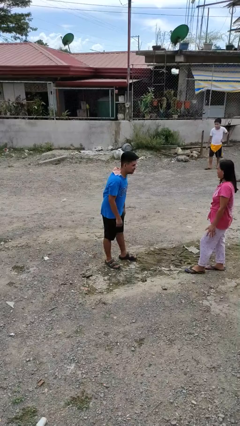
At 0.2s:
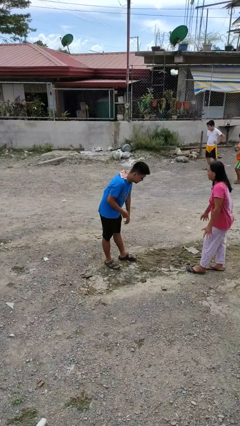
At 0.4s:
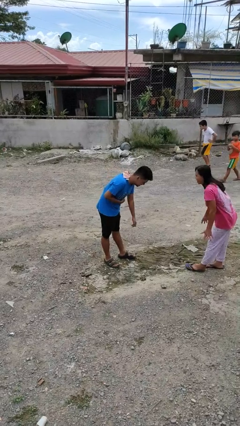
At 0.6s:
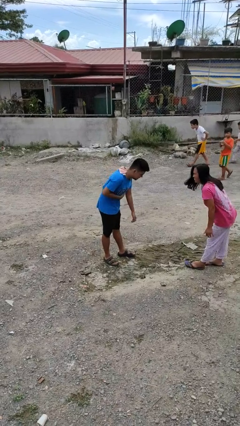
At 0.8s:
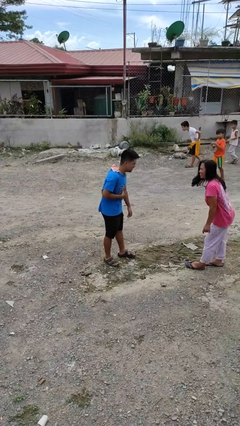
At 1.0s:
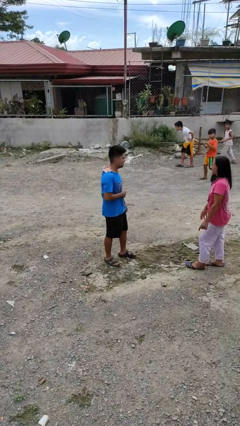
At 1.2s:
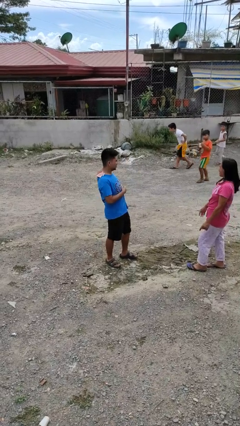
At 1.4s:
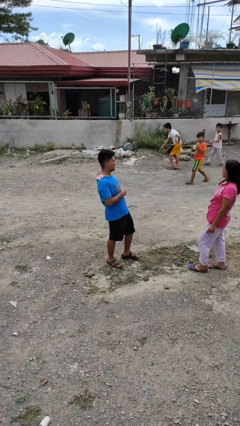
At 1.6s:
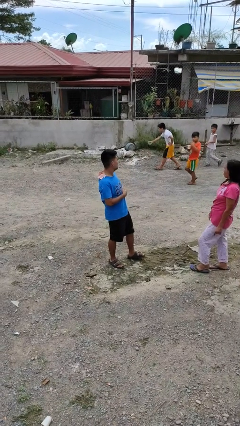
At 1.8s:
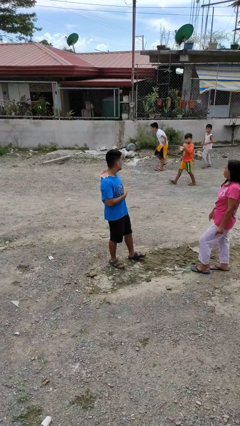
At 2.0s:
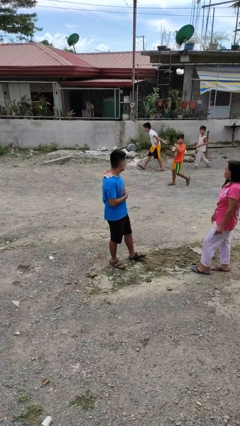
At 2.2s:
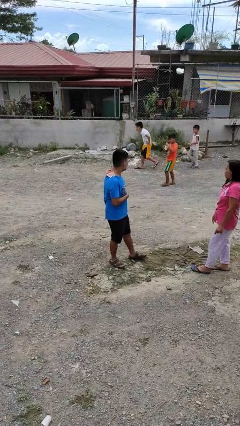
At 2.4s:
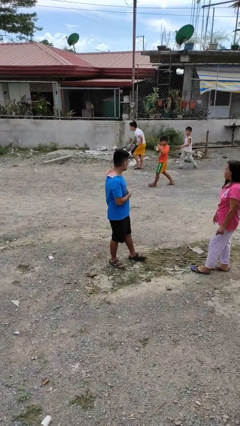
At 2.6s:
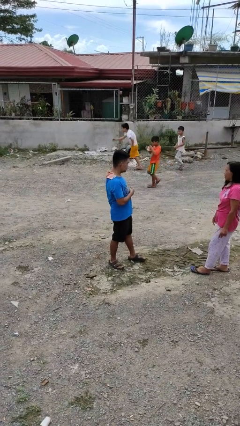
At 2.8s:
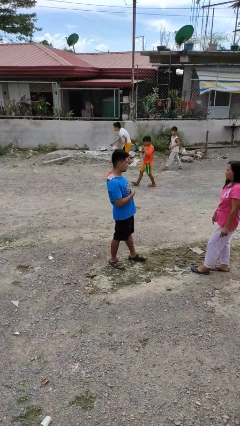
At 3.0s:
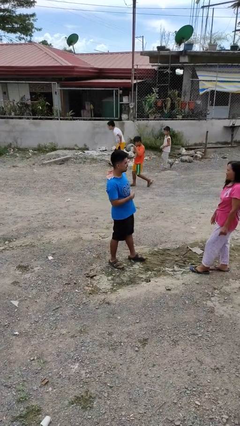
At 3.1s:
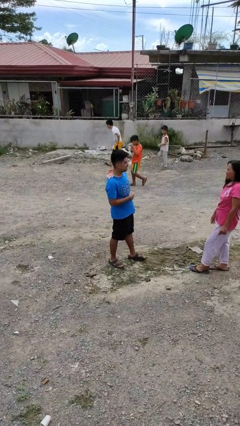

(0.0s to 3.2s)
person laughs with person

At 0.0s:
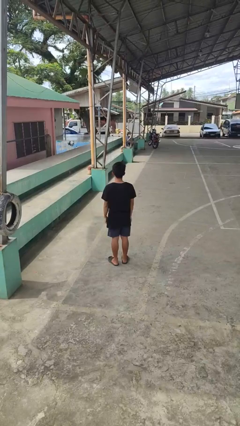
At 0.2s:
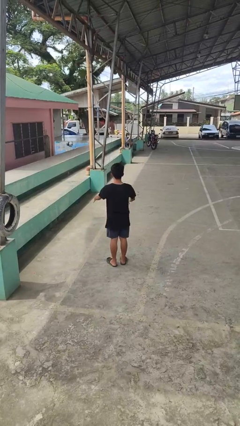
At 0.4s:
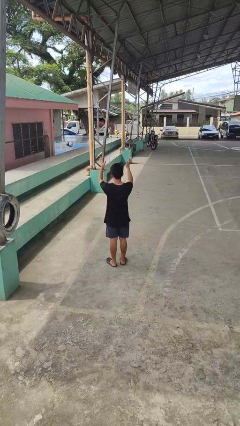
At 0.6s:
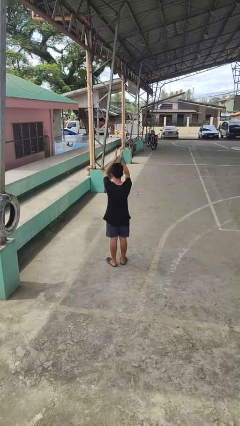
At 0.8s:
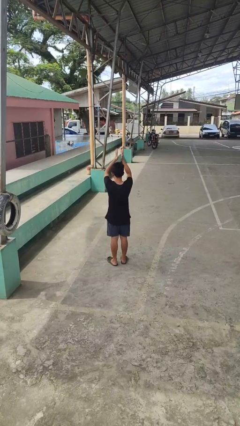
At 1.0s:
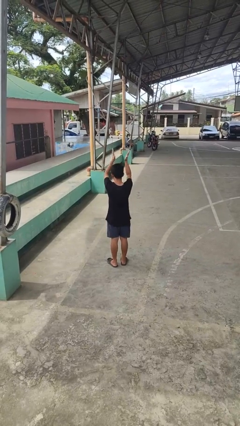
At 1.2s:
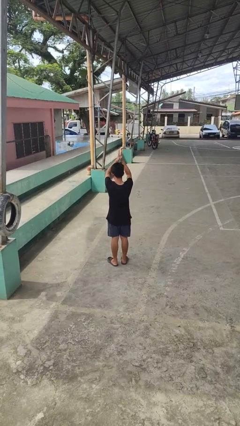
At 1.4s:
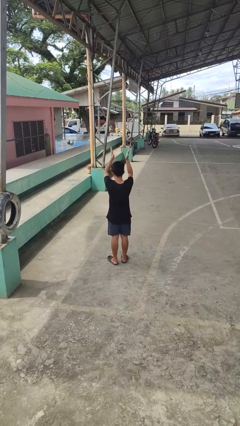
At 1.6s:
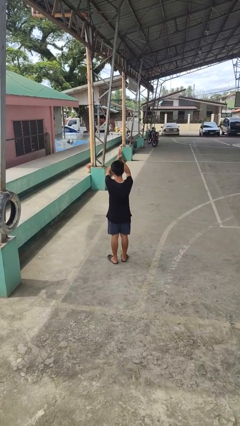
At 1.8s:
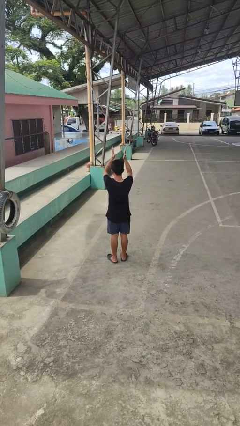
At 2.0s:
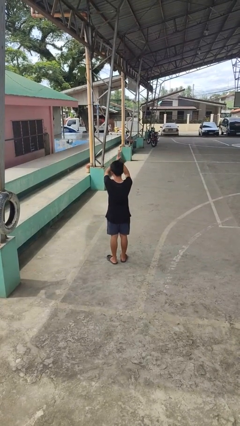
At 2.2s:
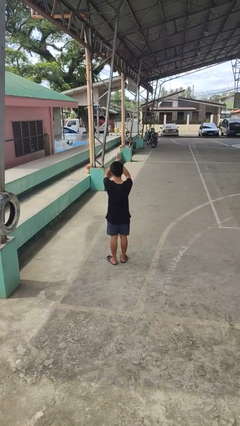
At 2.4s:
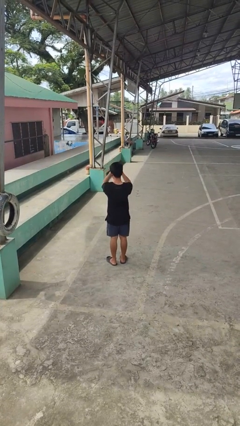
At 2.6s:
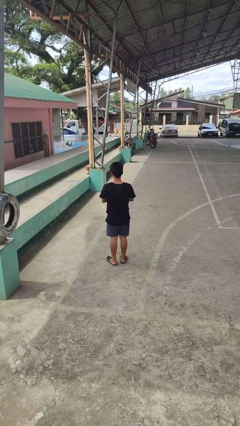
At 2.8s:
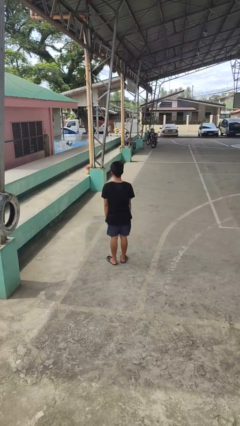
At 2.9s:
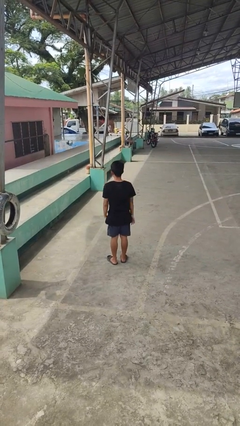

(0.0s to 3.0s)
person claps hands

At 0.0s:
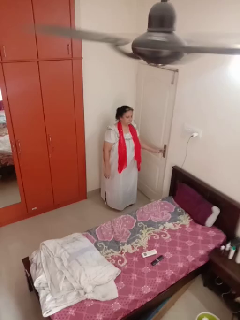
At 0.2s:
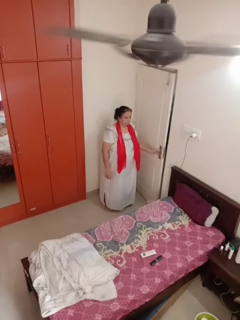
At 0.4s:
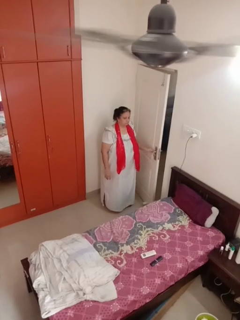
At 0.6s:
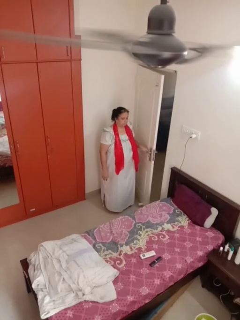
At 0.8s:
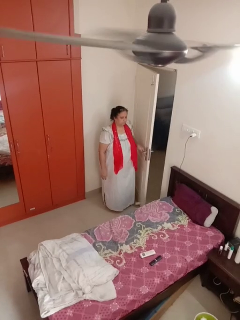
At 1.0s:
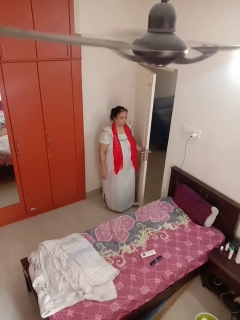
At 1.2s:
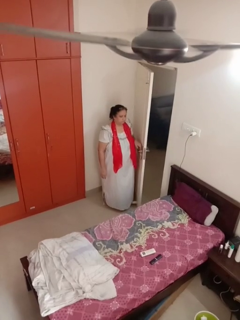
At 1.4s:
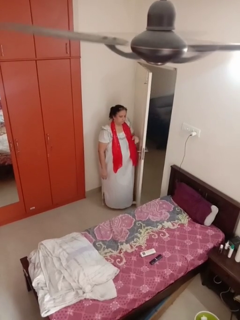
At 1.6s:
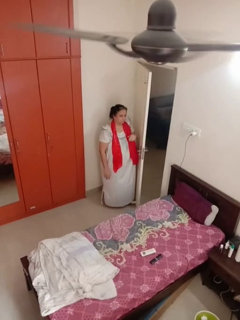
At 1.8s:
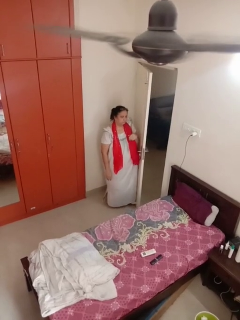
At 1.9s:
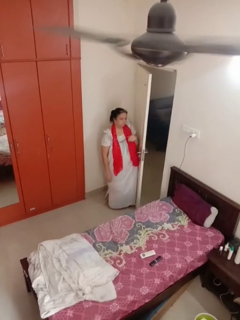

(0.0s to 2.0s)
person opens facility door

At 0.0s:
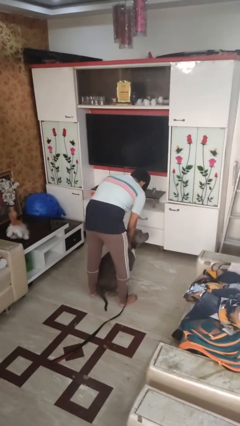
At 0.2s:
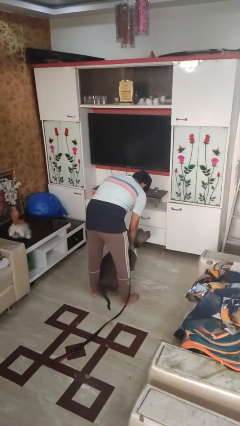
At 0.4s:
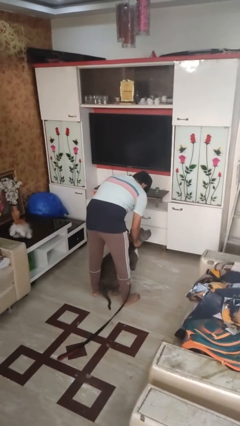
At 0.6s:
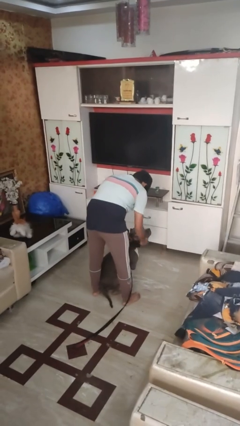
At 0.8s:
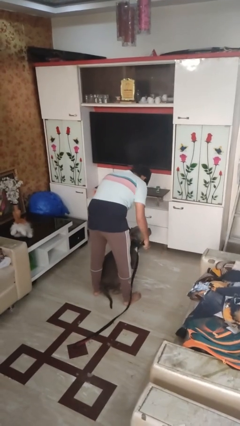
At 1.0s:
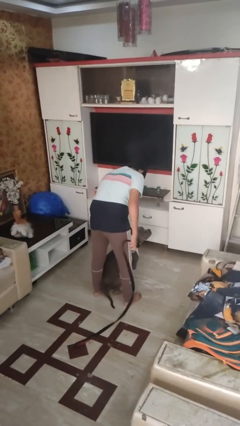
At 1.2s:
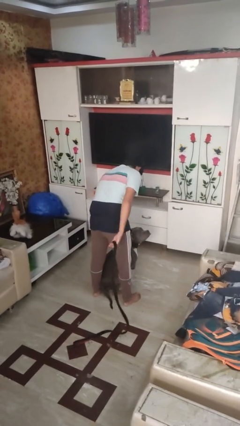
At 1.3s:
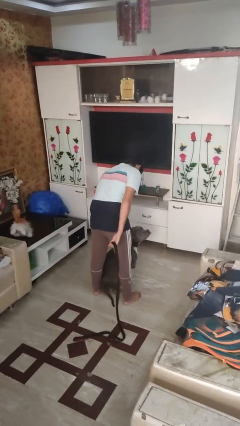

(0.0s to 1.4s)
person unattaches leash from dog

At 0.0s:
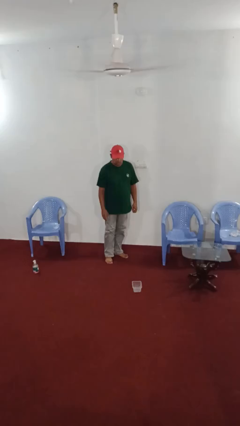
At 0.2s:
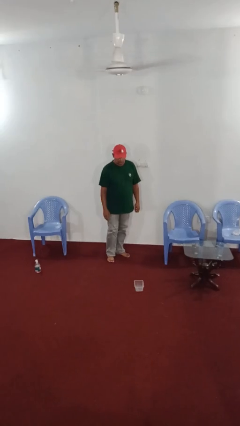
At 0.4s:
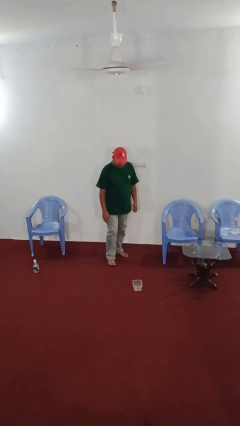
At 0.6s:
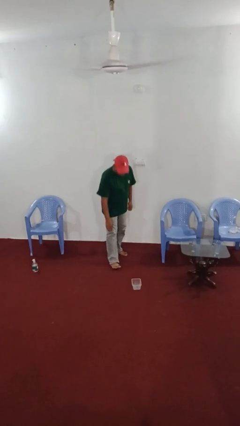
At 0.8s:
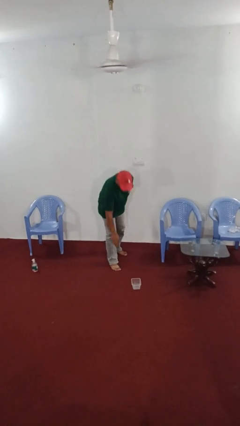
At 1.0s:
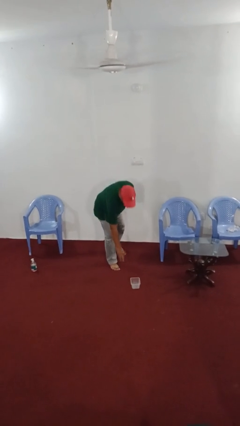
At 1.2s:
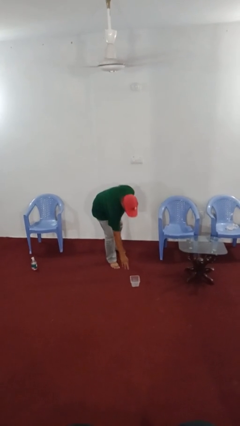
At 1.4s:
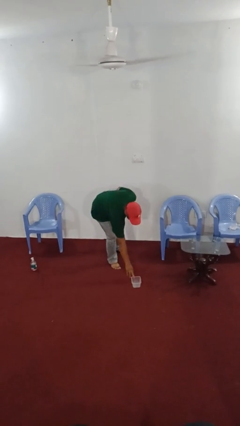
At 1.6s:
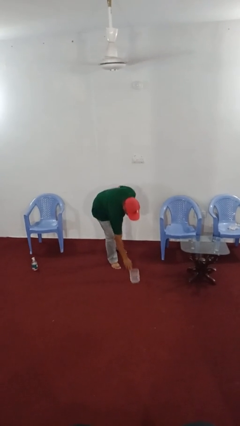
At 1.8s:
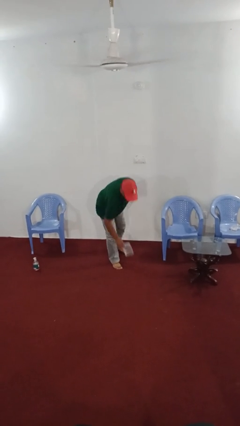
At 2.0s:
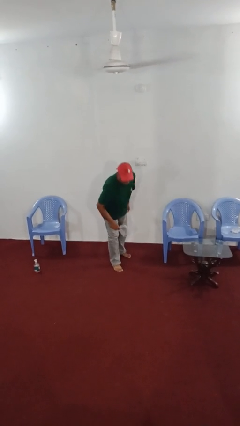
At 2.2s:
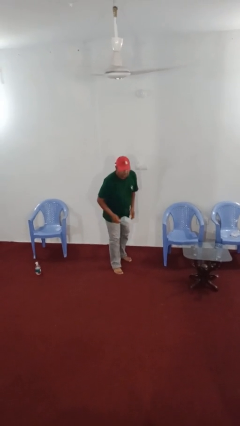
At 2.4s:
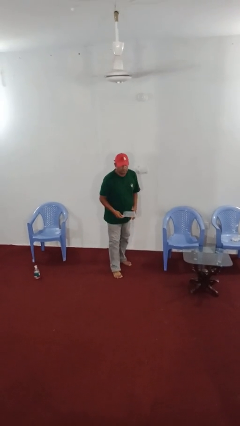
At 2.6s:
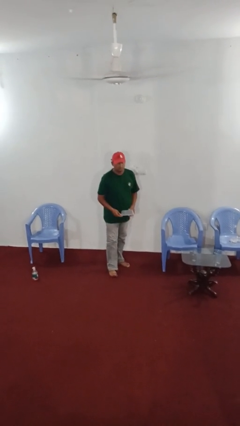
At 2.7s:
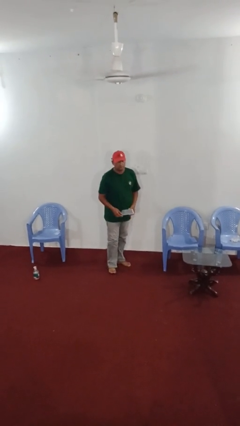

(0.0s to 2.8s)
person picks up object from floor

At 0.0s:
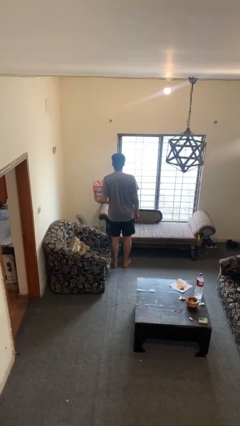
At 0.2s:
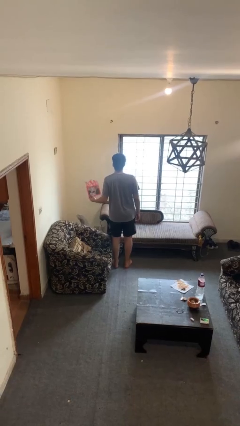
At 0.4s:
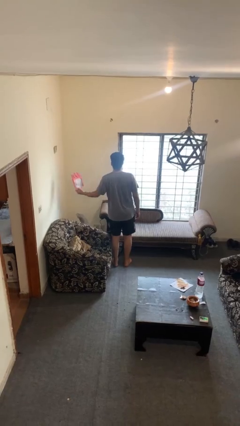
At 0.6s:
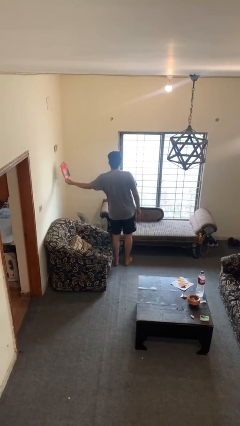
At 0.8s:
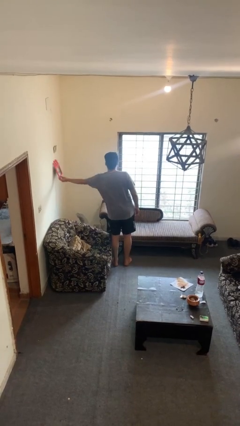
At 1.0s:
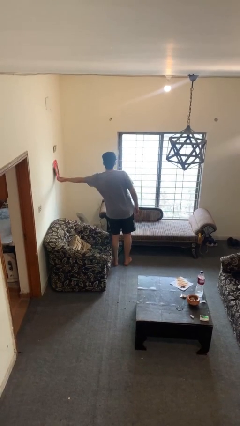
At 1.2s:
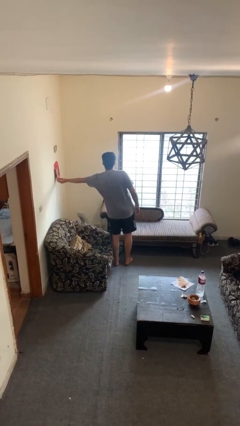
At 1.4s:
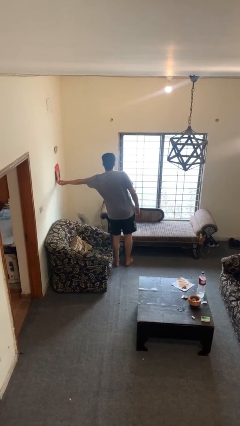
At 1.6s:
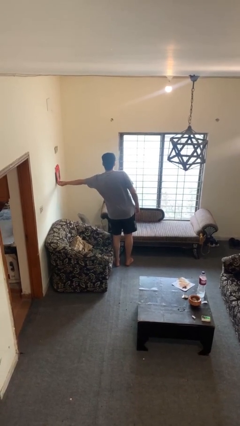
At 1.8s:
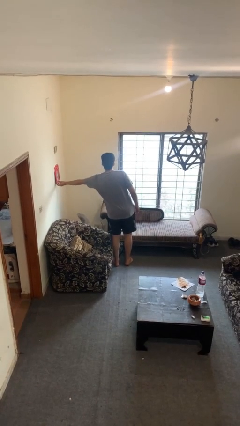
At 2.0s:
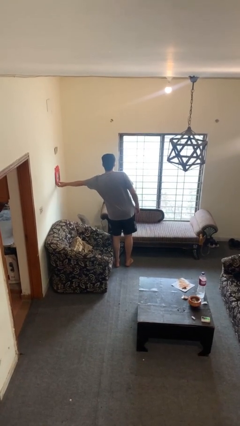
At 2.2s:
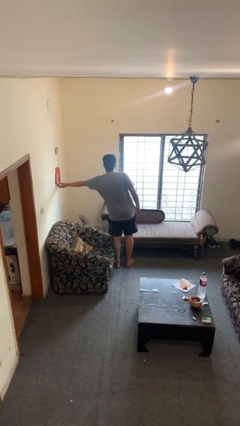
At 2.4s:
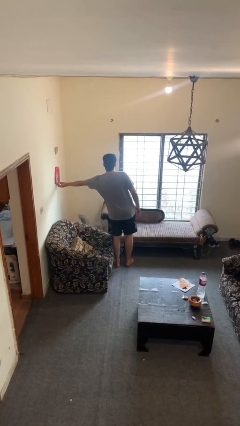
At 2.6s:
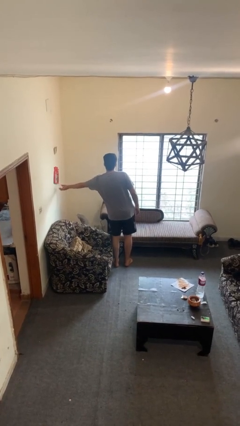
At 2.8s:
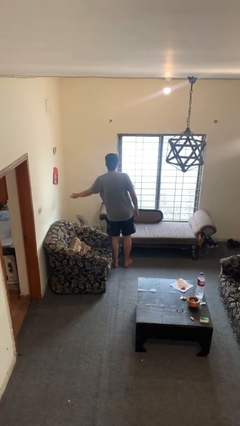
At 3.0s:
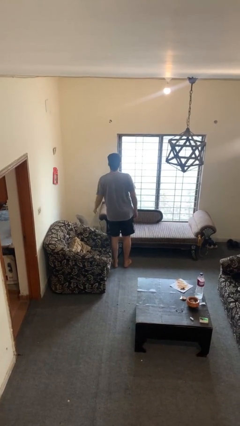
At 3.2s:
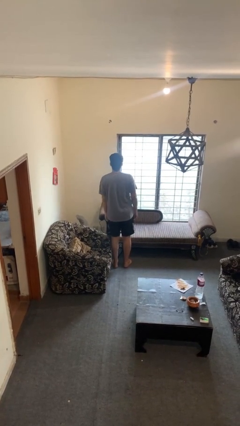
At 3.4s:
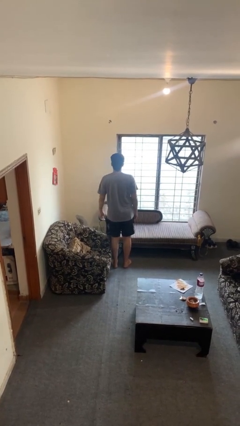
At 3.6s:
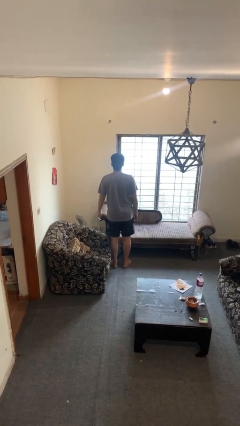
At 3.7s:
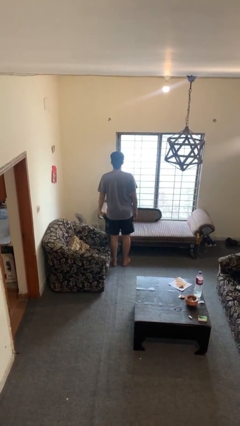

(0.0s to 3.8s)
person puts up picture frame

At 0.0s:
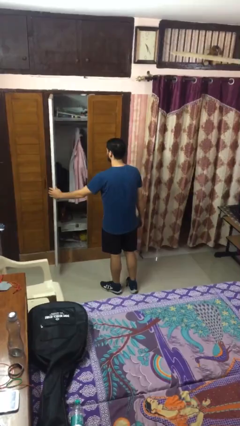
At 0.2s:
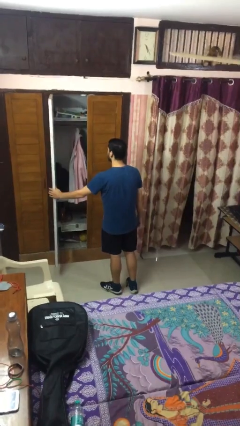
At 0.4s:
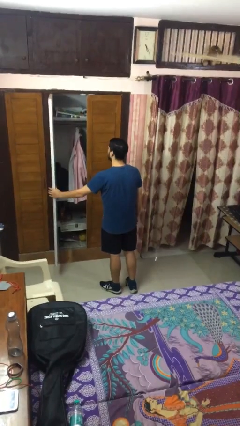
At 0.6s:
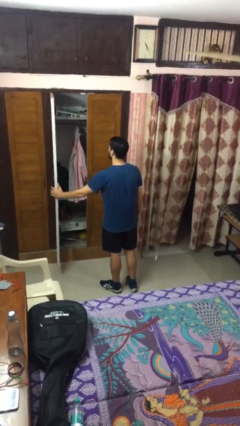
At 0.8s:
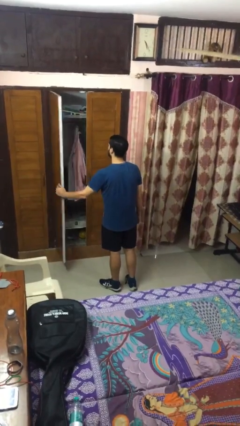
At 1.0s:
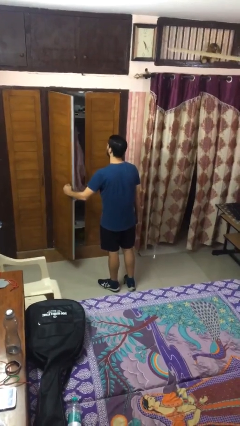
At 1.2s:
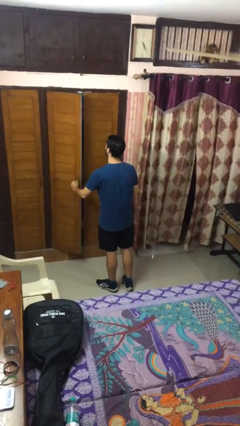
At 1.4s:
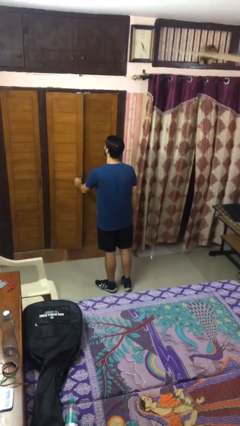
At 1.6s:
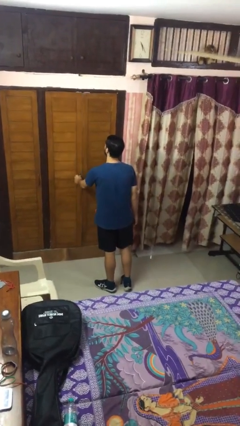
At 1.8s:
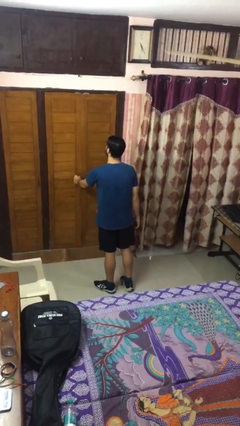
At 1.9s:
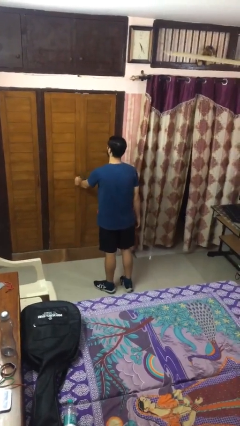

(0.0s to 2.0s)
person closes closet door
